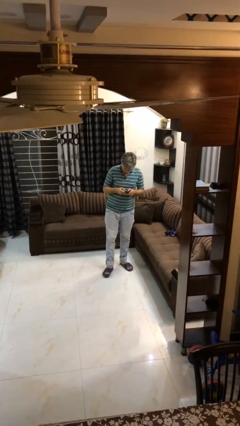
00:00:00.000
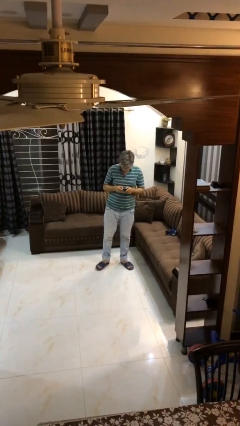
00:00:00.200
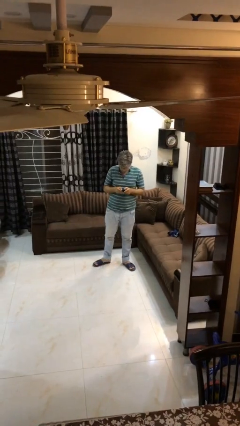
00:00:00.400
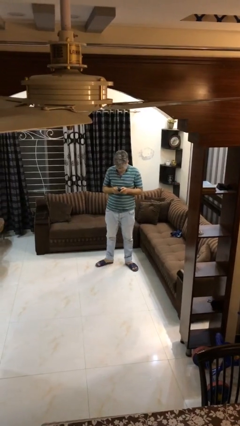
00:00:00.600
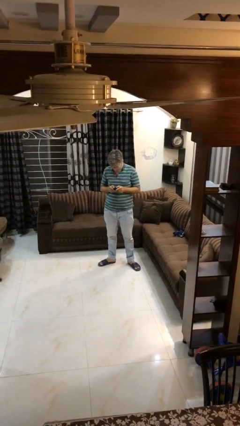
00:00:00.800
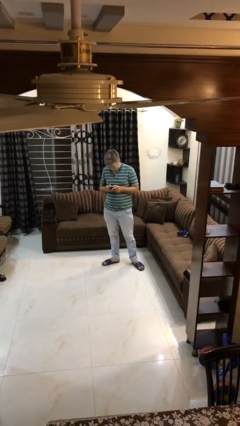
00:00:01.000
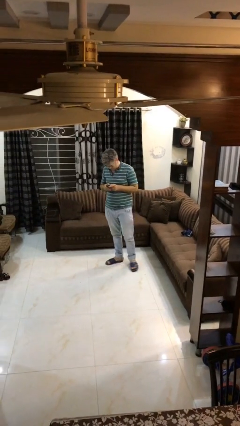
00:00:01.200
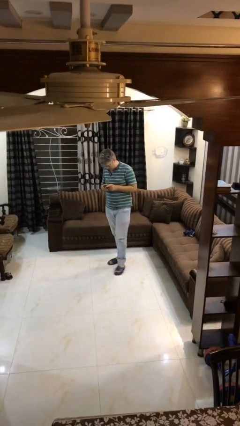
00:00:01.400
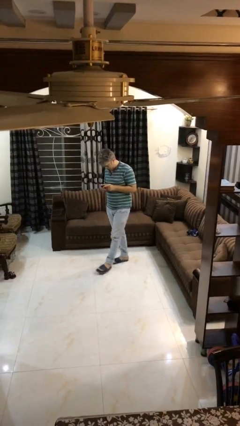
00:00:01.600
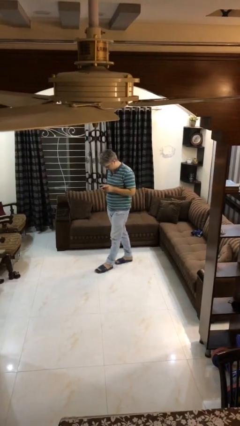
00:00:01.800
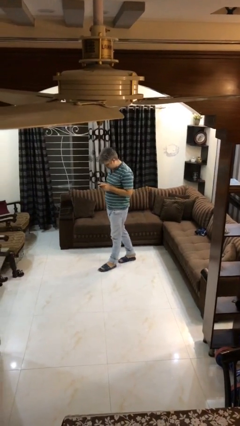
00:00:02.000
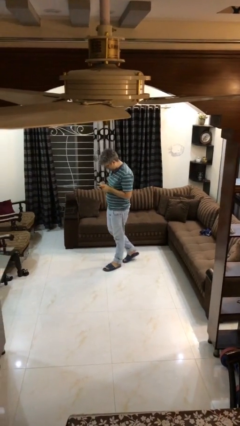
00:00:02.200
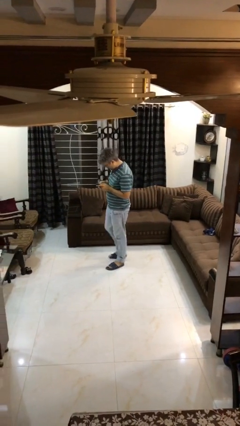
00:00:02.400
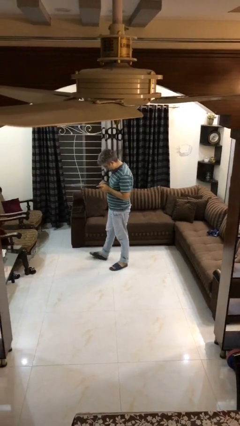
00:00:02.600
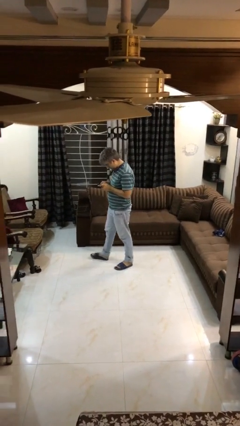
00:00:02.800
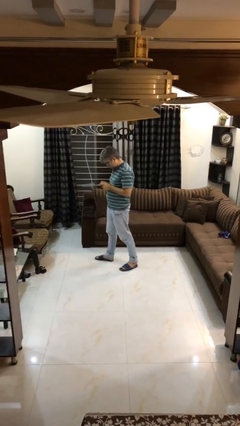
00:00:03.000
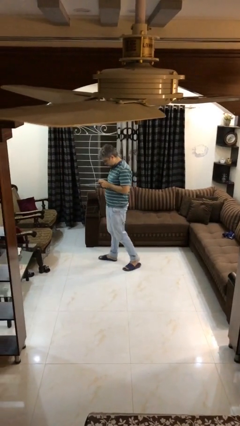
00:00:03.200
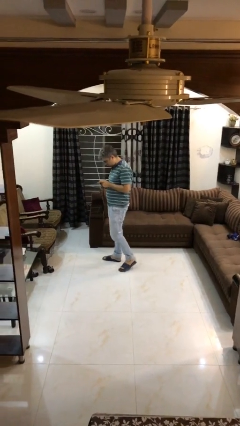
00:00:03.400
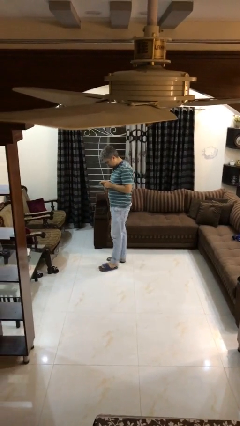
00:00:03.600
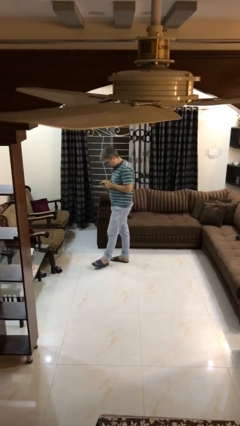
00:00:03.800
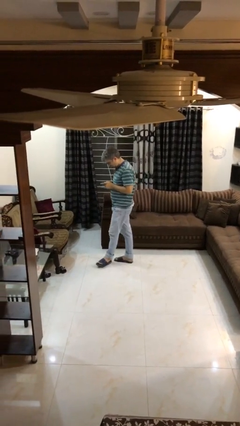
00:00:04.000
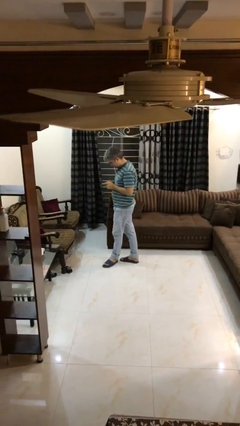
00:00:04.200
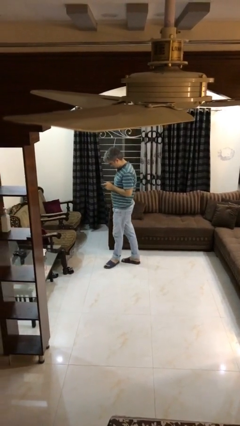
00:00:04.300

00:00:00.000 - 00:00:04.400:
person texts on phone

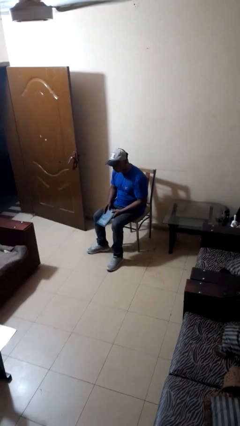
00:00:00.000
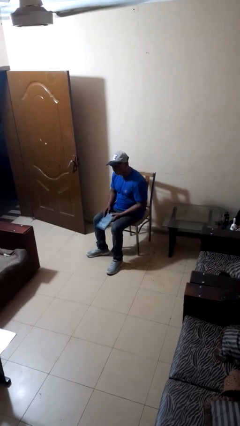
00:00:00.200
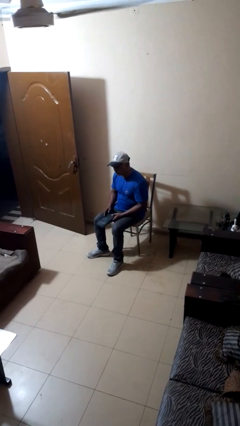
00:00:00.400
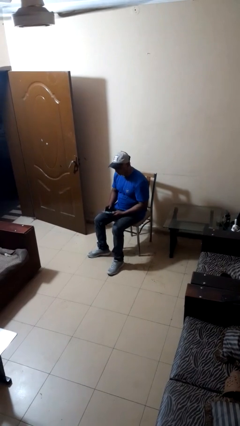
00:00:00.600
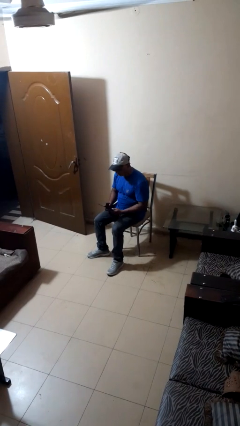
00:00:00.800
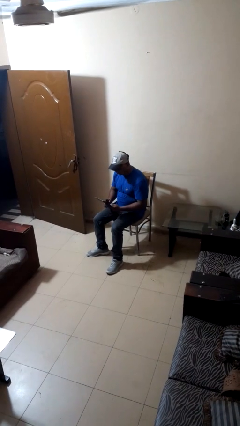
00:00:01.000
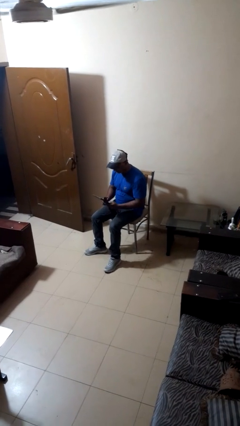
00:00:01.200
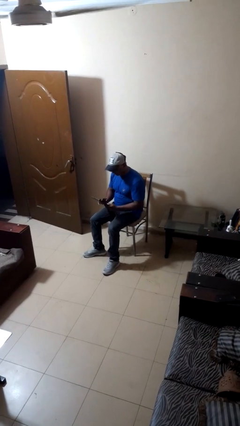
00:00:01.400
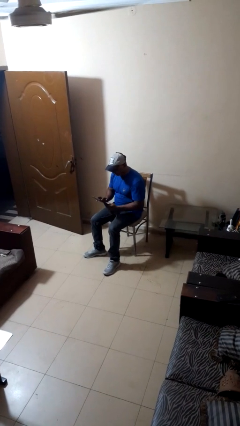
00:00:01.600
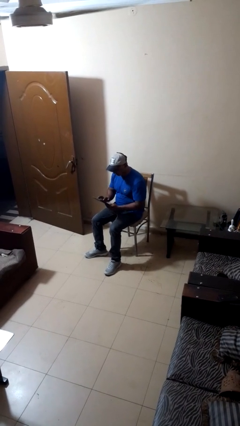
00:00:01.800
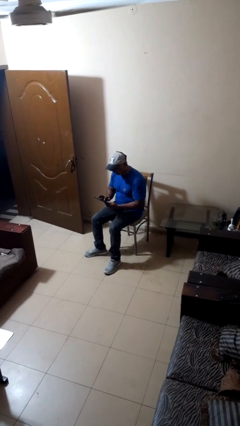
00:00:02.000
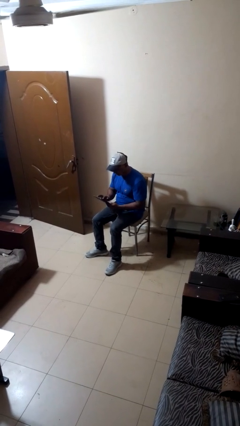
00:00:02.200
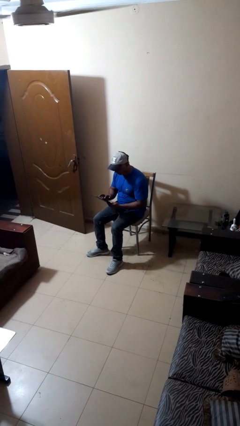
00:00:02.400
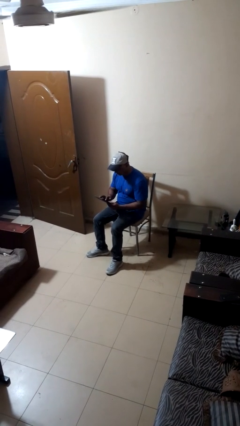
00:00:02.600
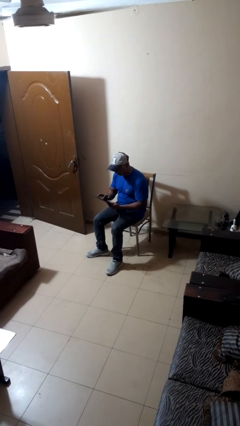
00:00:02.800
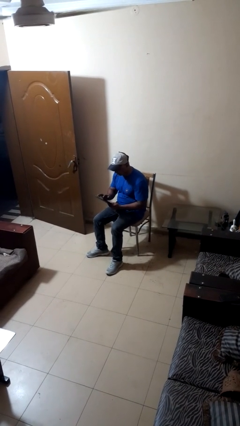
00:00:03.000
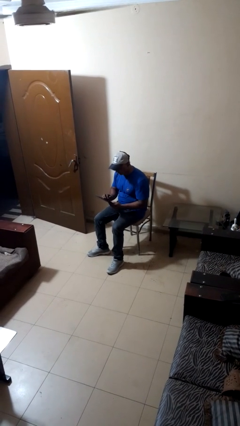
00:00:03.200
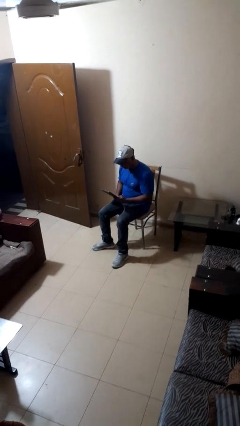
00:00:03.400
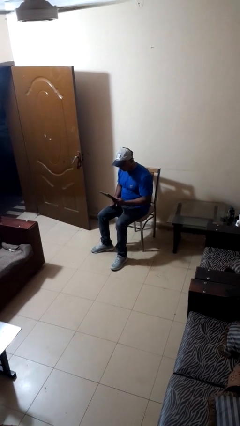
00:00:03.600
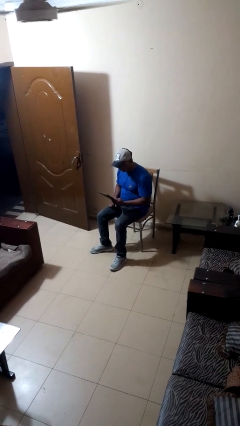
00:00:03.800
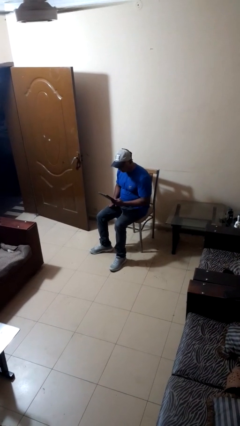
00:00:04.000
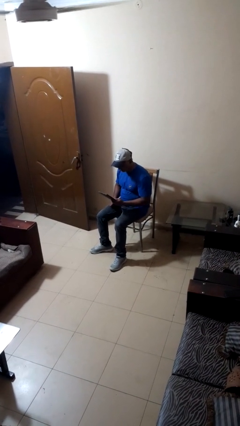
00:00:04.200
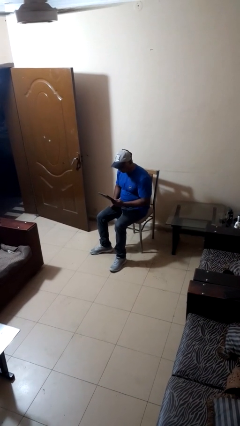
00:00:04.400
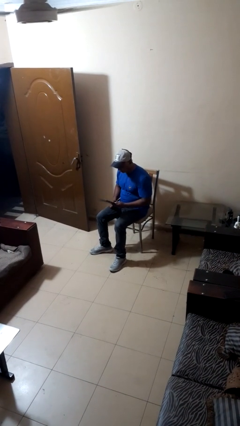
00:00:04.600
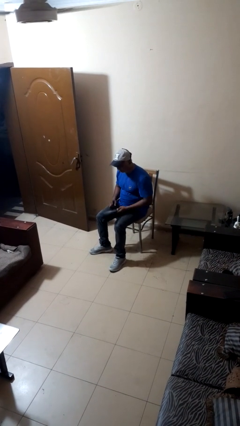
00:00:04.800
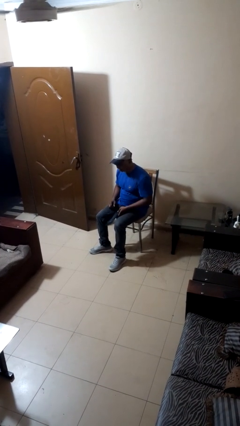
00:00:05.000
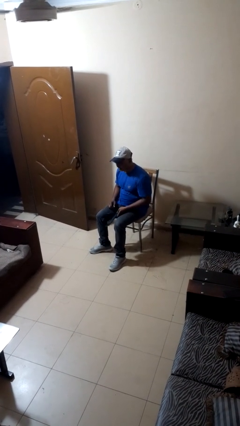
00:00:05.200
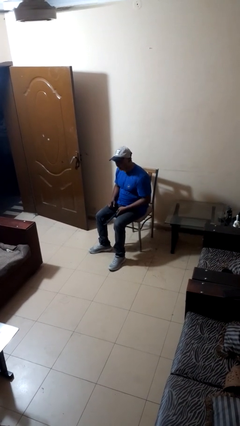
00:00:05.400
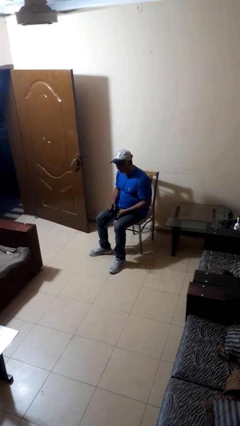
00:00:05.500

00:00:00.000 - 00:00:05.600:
person interacts with tablet

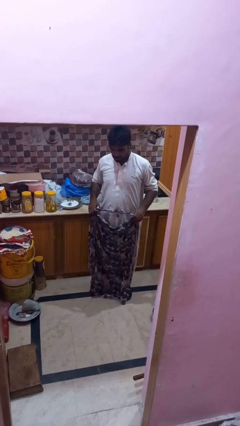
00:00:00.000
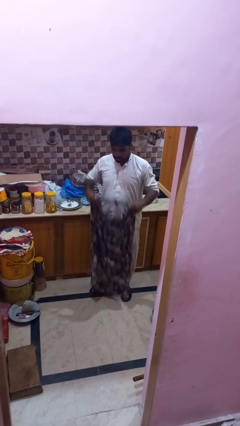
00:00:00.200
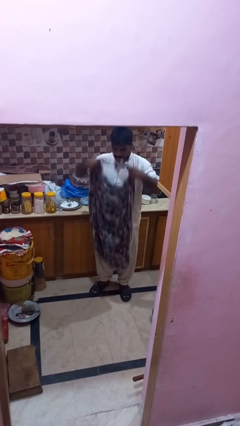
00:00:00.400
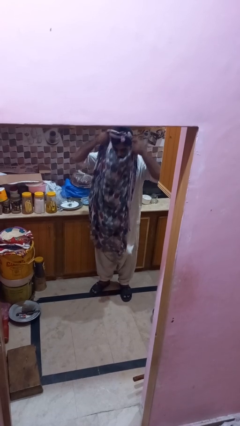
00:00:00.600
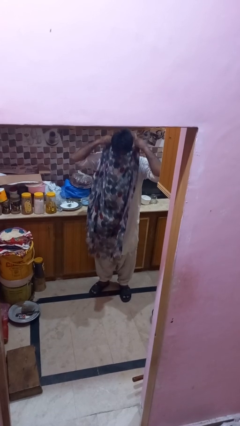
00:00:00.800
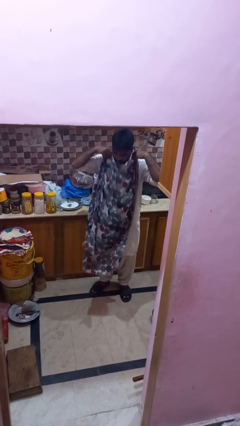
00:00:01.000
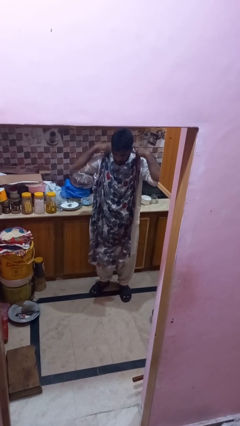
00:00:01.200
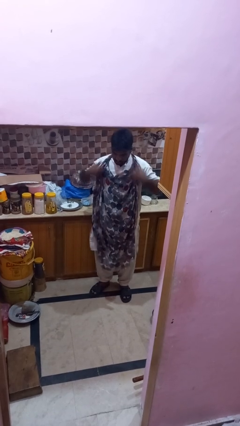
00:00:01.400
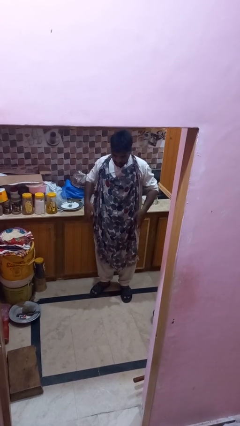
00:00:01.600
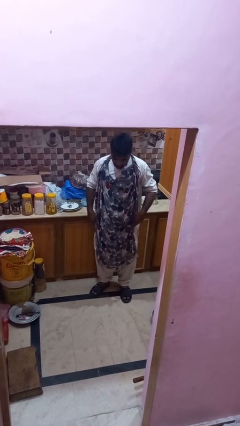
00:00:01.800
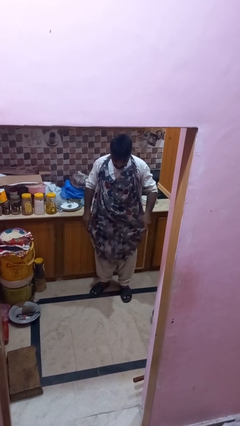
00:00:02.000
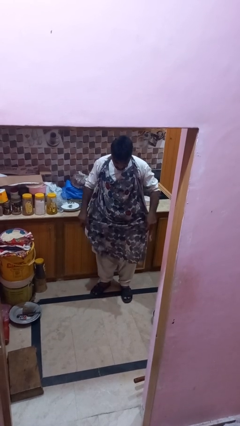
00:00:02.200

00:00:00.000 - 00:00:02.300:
person puts on apron

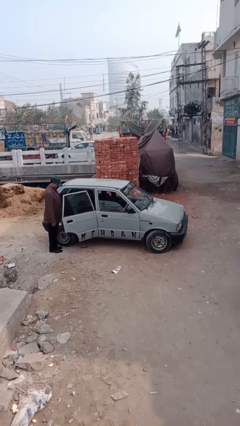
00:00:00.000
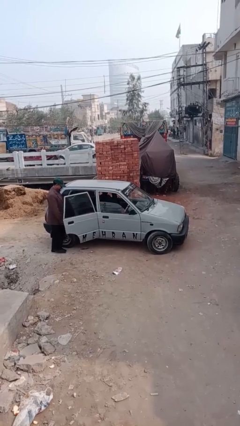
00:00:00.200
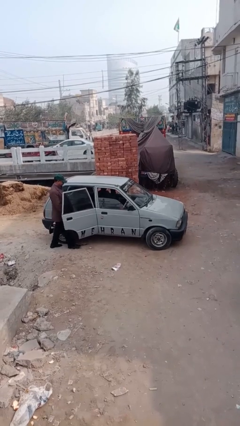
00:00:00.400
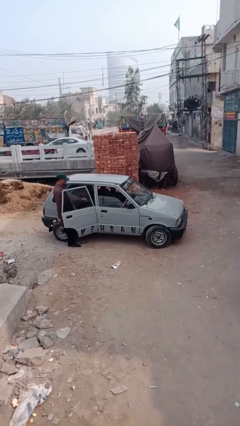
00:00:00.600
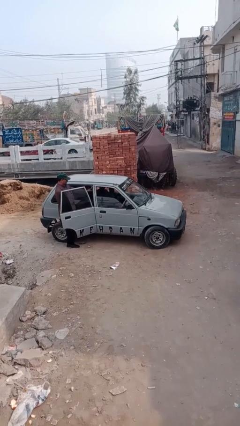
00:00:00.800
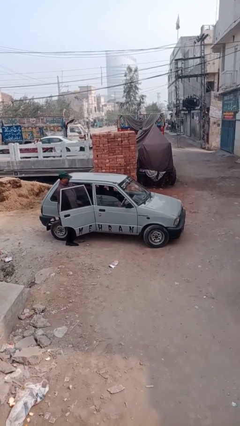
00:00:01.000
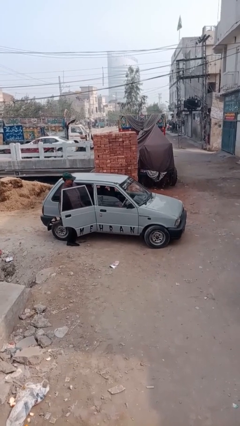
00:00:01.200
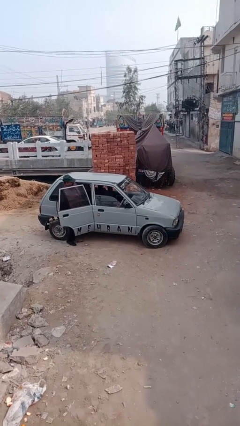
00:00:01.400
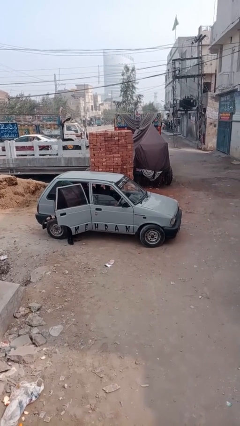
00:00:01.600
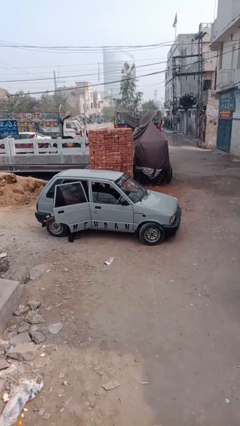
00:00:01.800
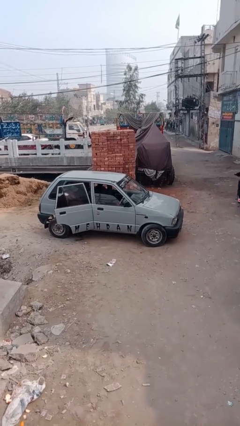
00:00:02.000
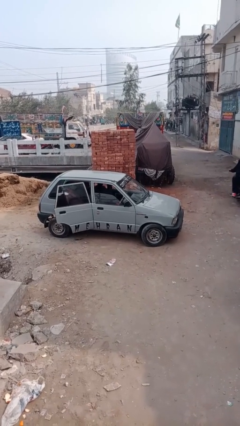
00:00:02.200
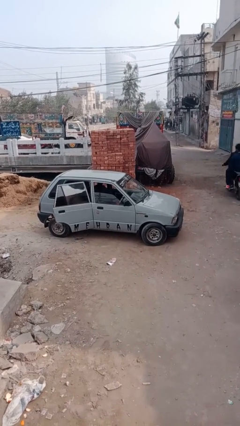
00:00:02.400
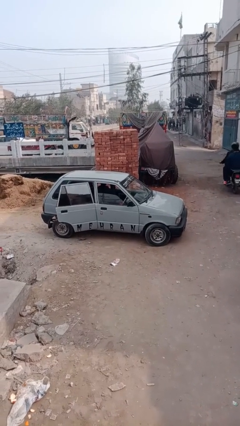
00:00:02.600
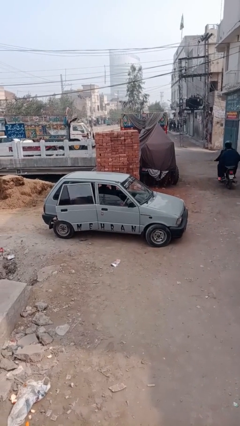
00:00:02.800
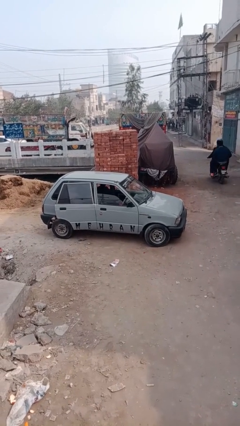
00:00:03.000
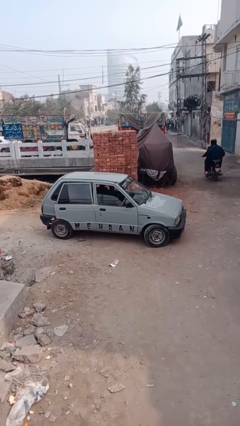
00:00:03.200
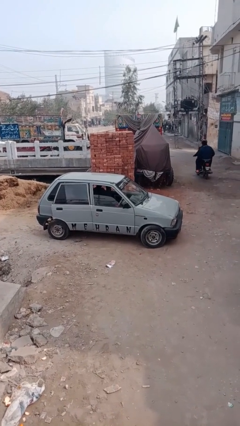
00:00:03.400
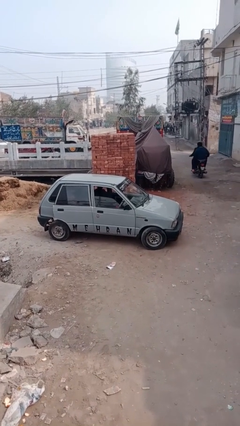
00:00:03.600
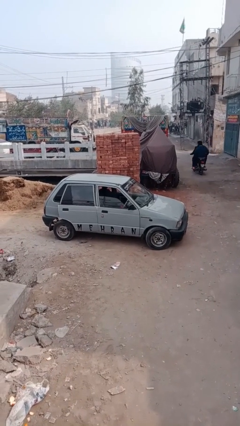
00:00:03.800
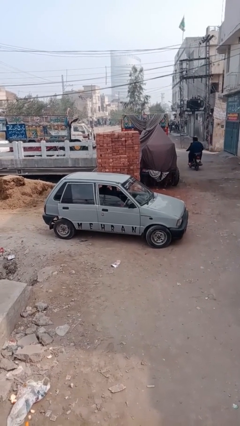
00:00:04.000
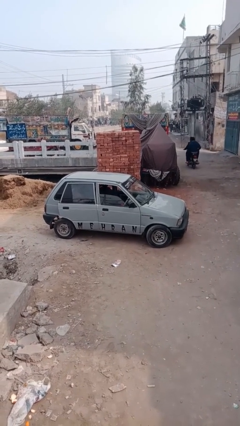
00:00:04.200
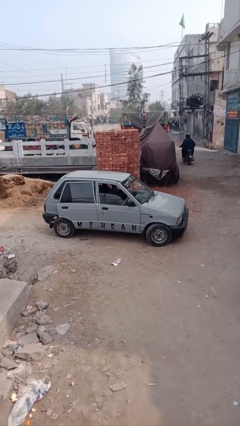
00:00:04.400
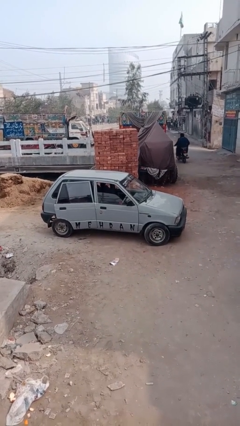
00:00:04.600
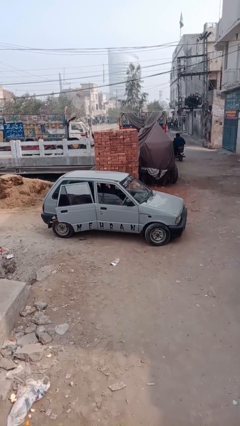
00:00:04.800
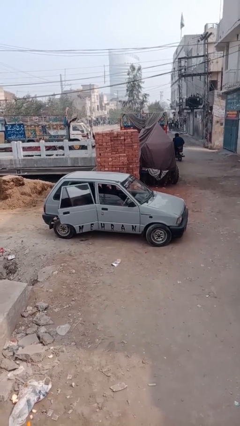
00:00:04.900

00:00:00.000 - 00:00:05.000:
car picks up person

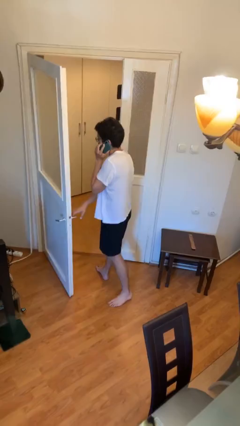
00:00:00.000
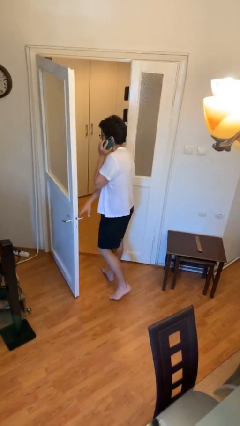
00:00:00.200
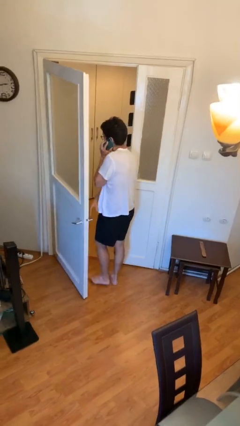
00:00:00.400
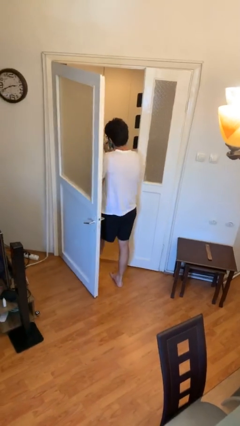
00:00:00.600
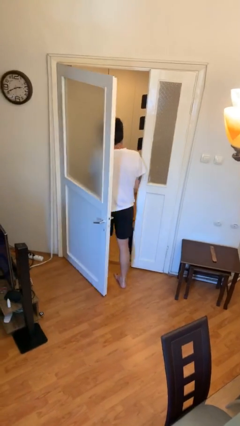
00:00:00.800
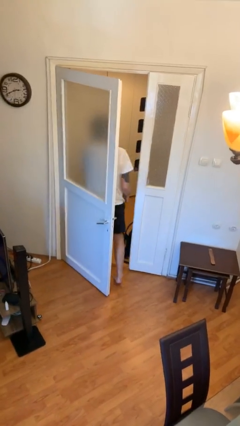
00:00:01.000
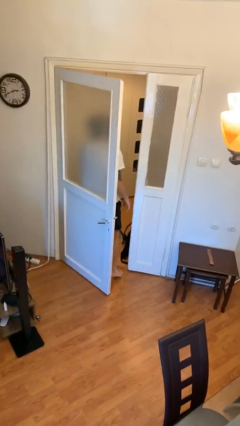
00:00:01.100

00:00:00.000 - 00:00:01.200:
person exits scene through structure
